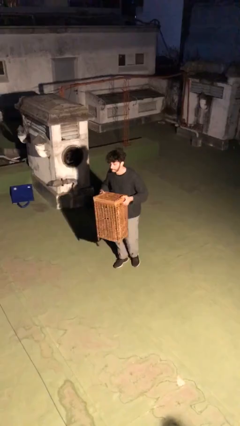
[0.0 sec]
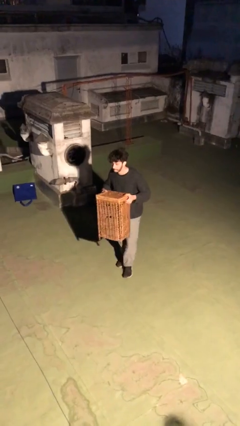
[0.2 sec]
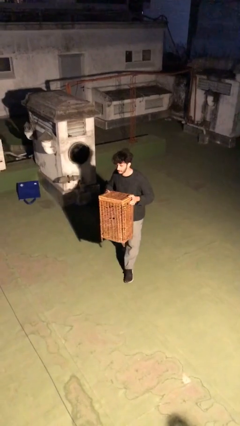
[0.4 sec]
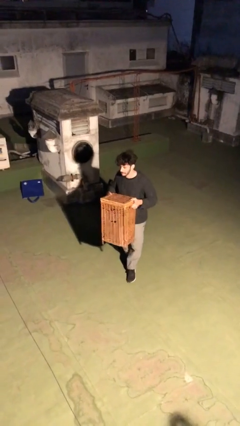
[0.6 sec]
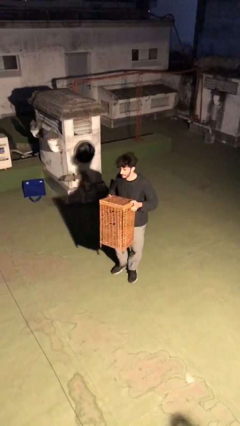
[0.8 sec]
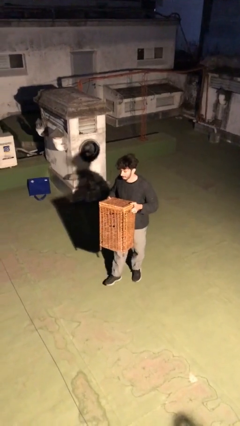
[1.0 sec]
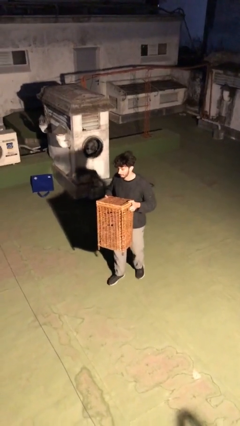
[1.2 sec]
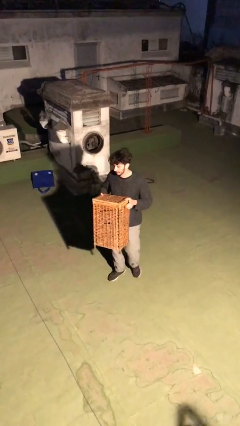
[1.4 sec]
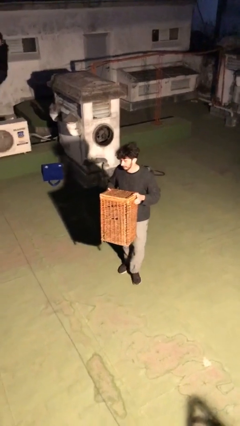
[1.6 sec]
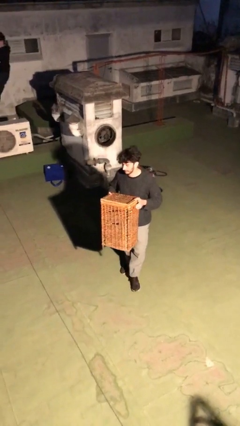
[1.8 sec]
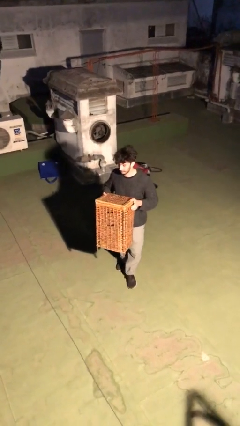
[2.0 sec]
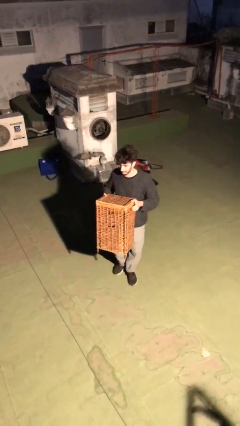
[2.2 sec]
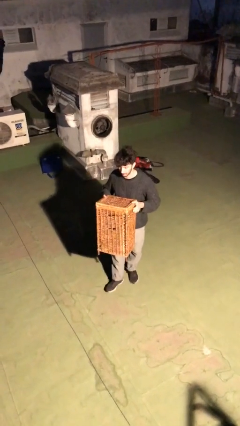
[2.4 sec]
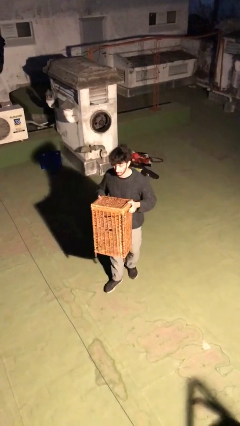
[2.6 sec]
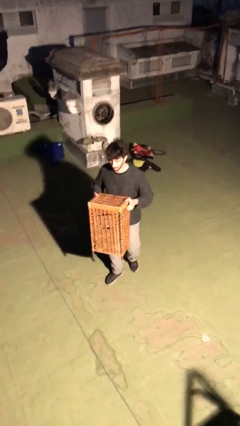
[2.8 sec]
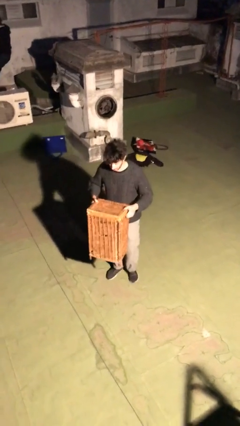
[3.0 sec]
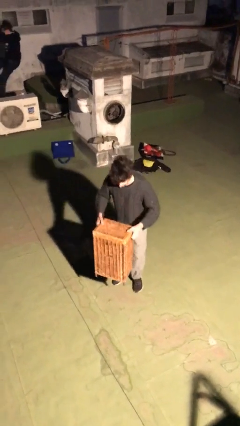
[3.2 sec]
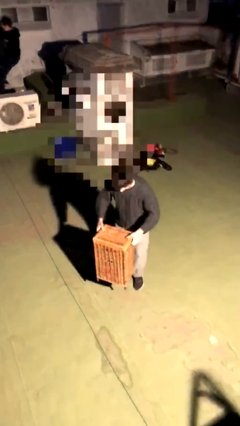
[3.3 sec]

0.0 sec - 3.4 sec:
person carries heavy object

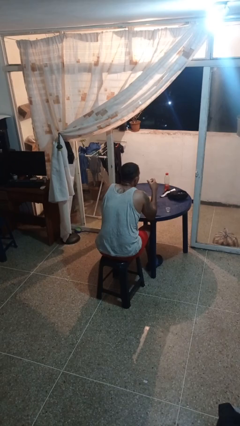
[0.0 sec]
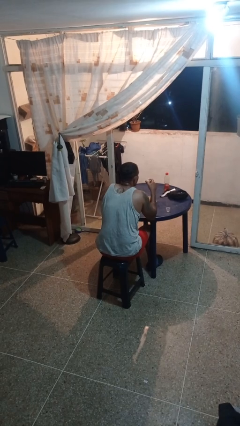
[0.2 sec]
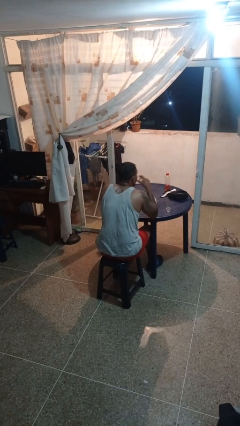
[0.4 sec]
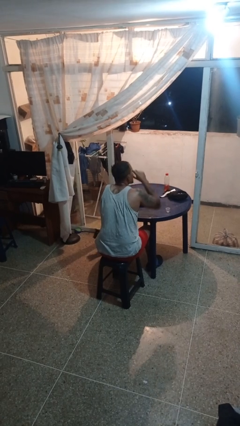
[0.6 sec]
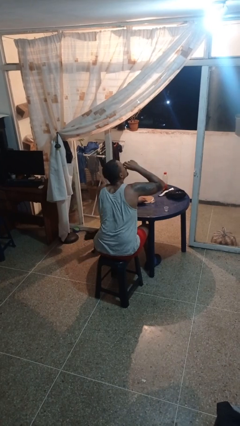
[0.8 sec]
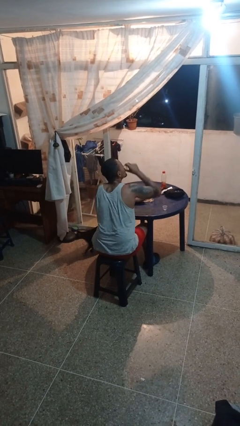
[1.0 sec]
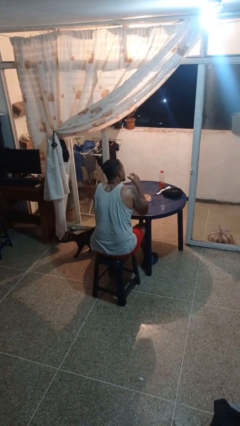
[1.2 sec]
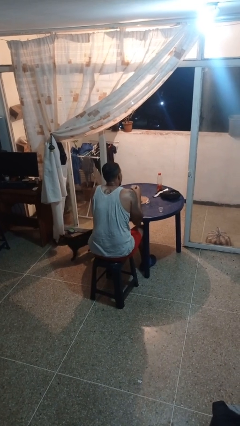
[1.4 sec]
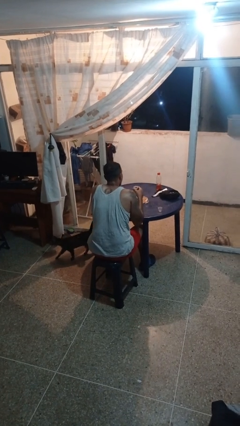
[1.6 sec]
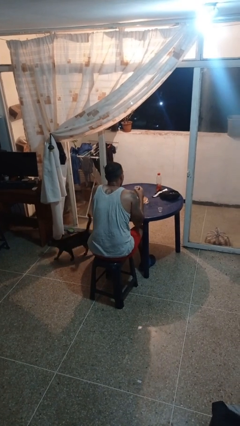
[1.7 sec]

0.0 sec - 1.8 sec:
person drinks from shotglass

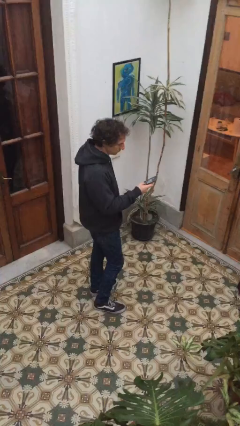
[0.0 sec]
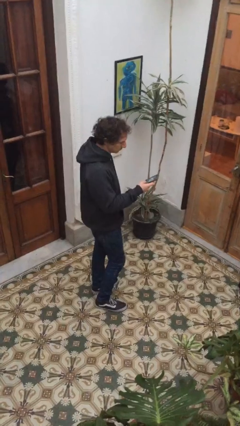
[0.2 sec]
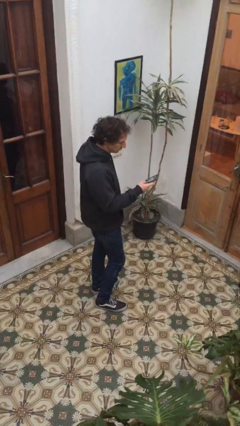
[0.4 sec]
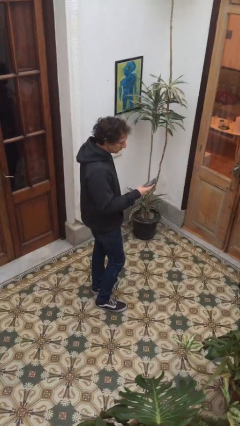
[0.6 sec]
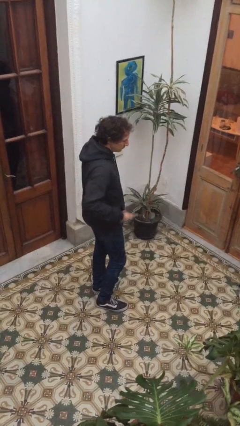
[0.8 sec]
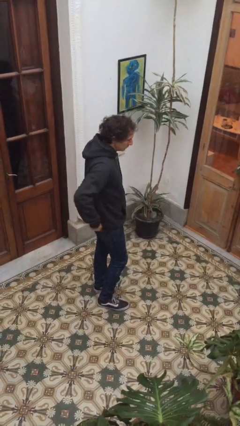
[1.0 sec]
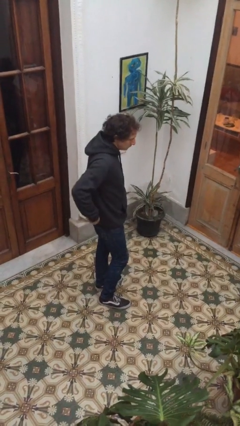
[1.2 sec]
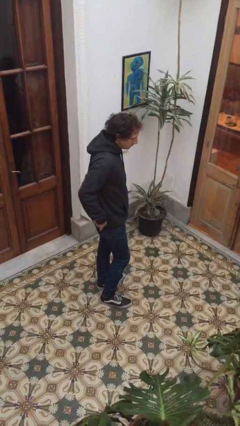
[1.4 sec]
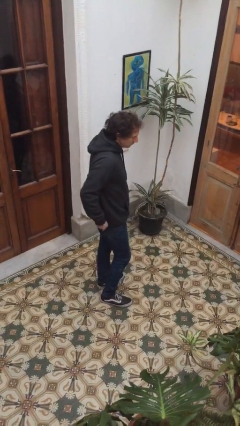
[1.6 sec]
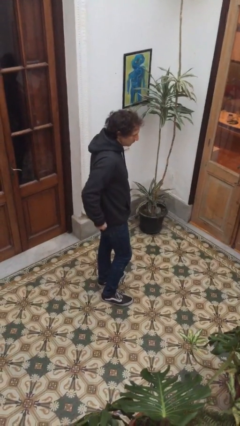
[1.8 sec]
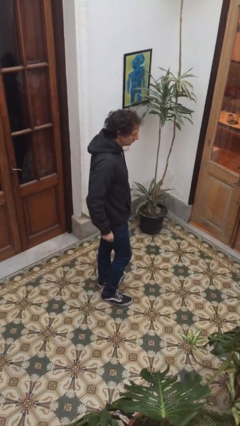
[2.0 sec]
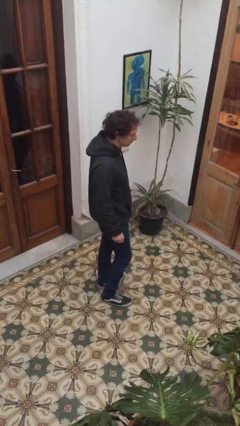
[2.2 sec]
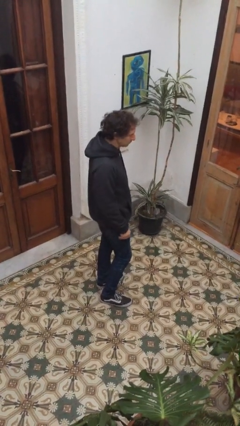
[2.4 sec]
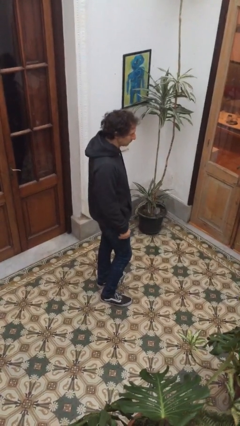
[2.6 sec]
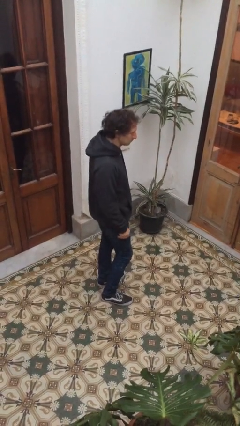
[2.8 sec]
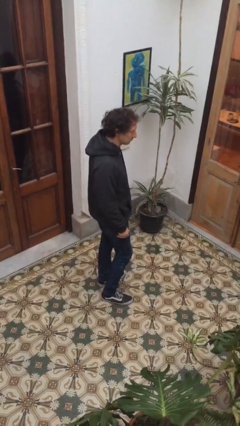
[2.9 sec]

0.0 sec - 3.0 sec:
person puts phone into pocket

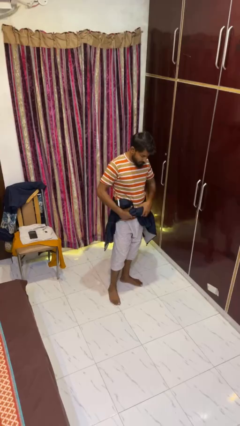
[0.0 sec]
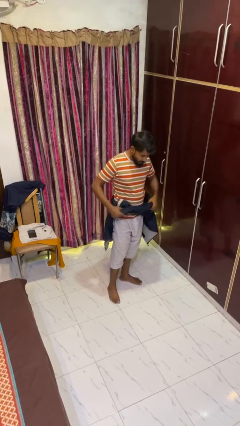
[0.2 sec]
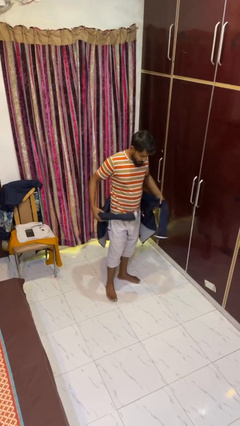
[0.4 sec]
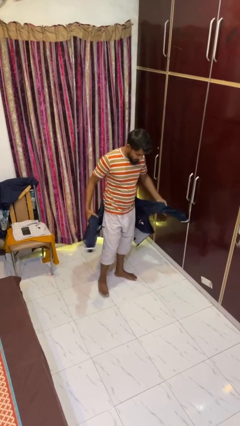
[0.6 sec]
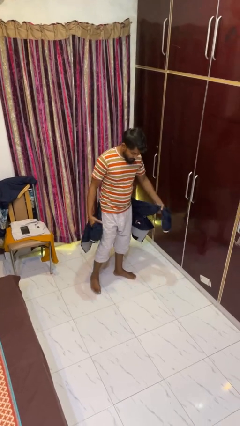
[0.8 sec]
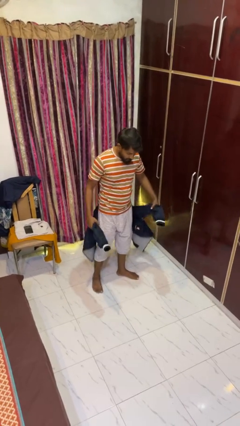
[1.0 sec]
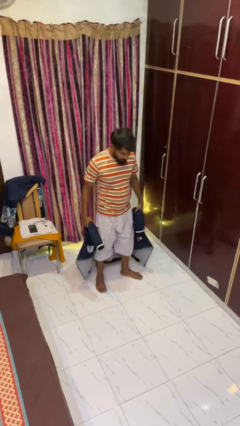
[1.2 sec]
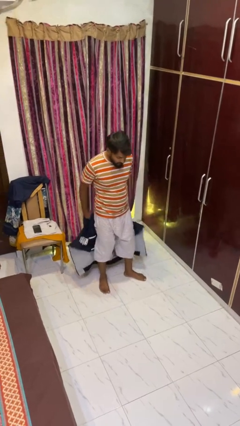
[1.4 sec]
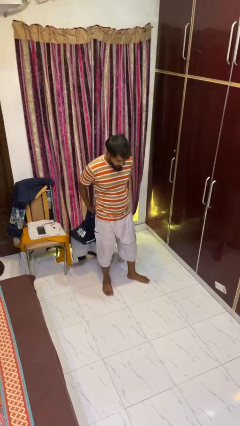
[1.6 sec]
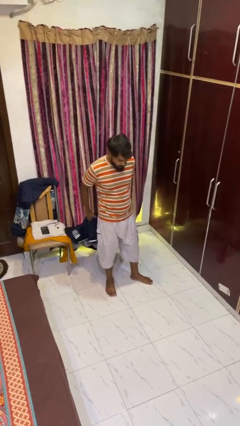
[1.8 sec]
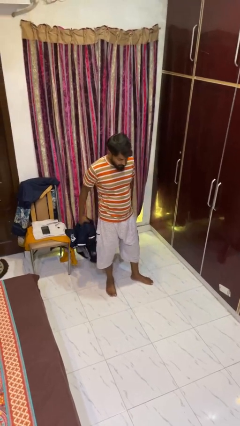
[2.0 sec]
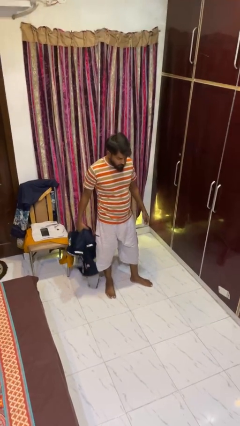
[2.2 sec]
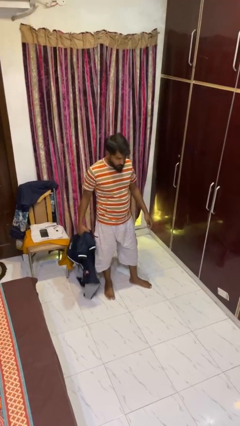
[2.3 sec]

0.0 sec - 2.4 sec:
person unties jacket around waist

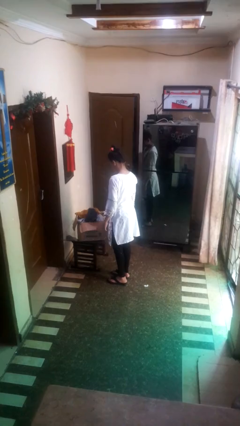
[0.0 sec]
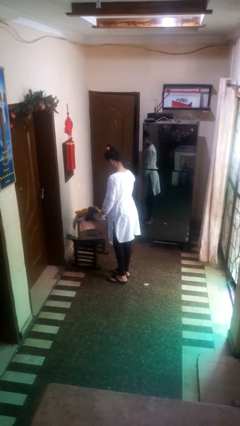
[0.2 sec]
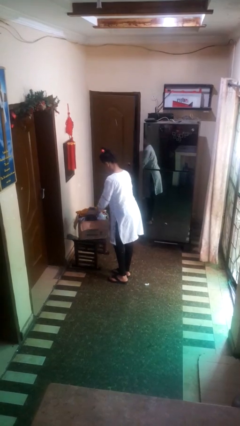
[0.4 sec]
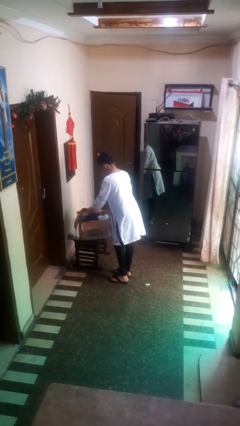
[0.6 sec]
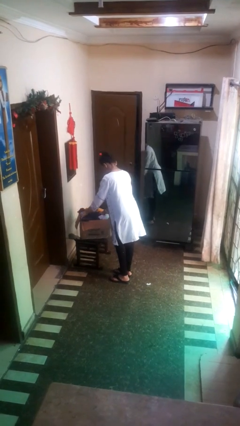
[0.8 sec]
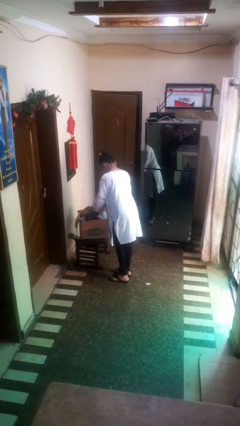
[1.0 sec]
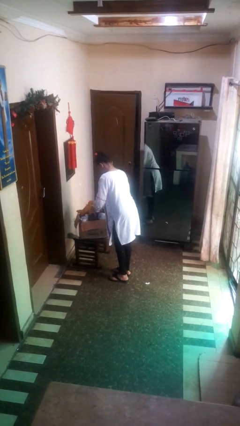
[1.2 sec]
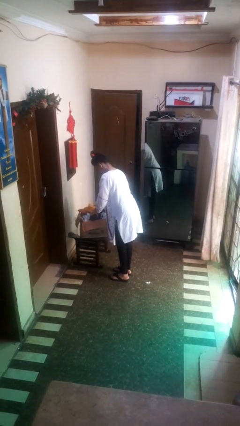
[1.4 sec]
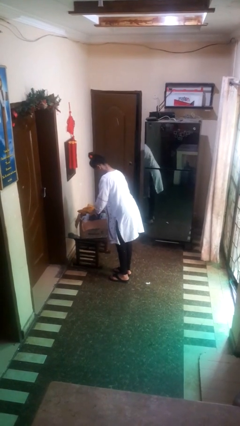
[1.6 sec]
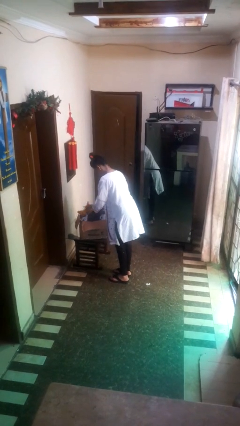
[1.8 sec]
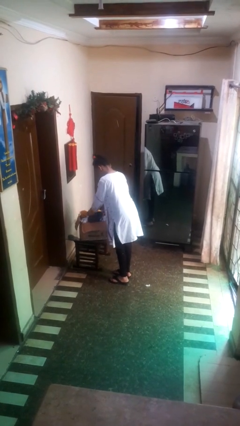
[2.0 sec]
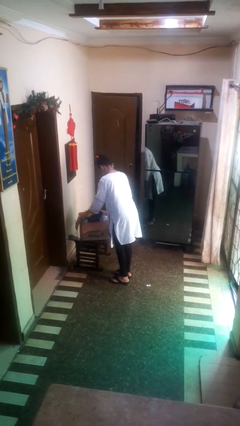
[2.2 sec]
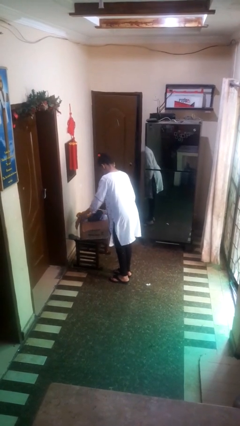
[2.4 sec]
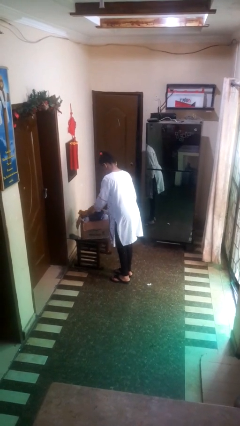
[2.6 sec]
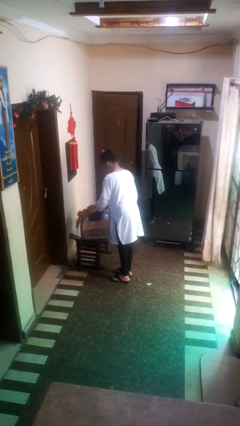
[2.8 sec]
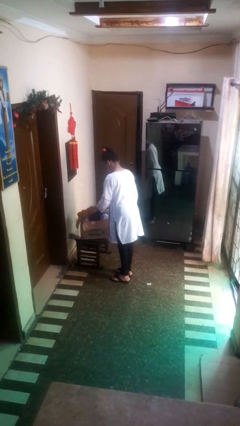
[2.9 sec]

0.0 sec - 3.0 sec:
person searches in box

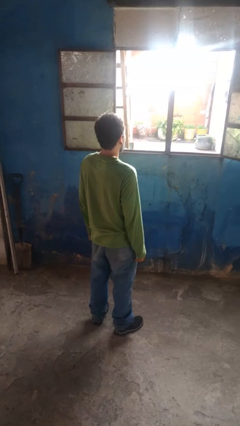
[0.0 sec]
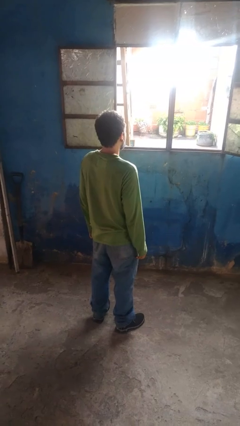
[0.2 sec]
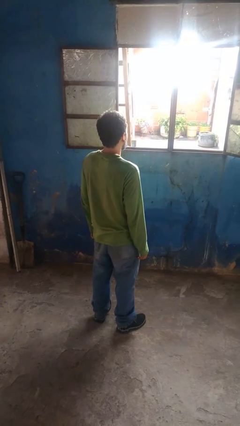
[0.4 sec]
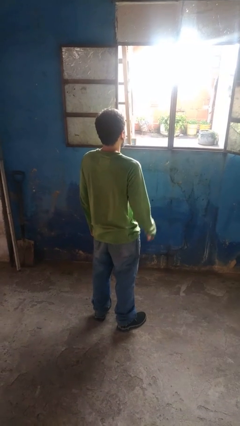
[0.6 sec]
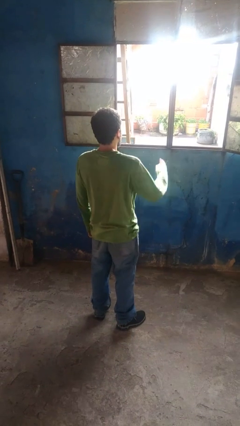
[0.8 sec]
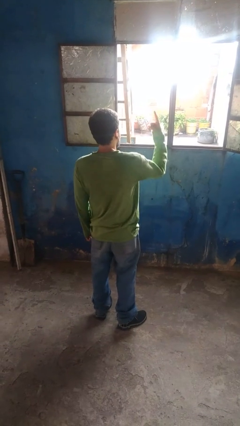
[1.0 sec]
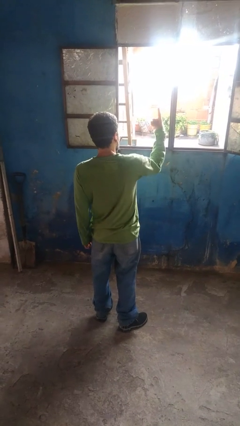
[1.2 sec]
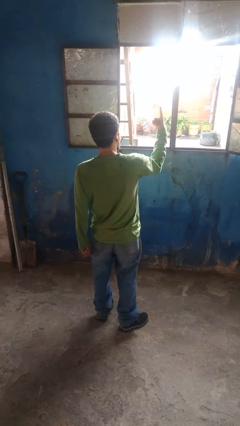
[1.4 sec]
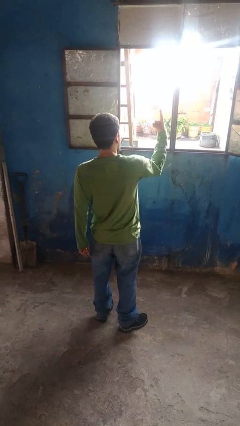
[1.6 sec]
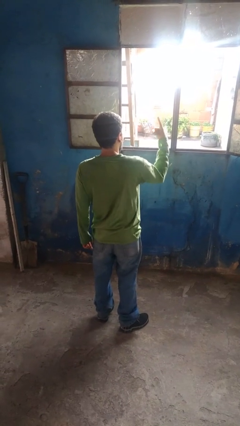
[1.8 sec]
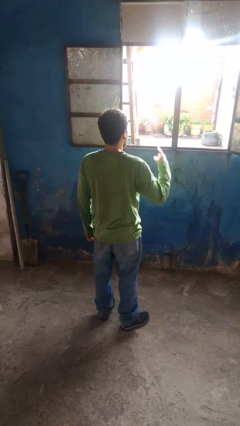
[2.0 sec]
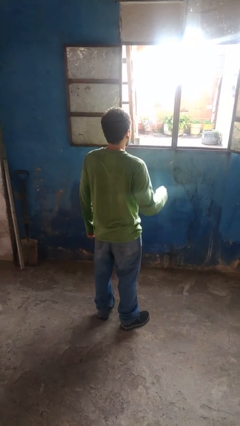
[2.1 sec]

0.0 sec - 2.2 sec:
person gestures number one

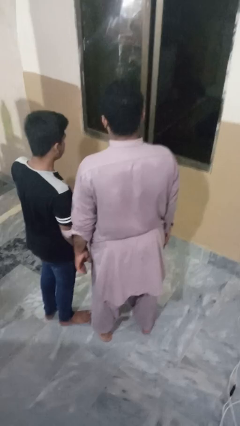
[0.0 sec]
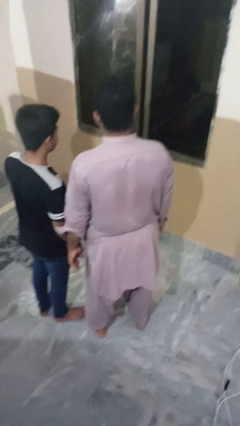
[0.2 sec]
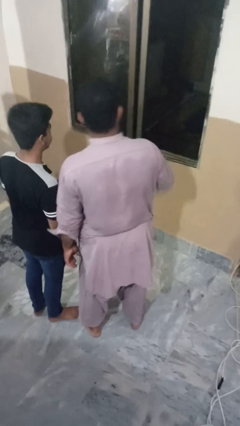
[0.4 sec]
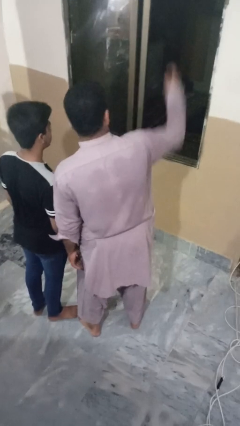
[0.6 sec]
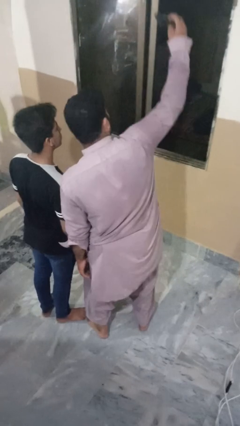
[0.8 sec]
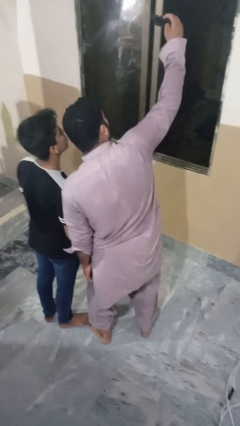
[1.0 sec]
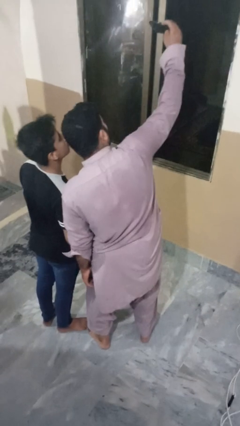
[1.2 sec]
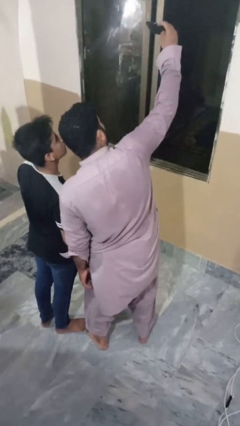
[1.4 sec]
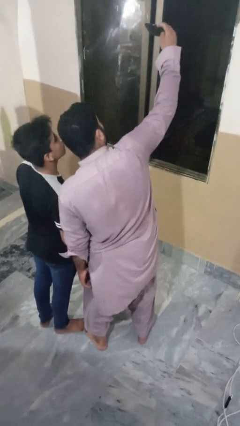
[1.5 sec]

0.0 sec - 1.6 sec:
person takes selfie with person
